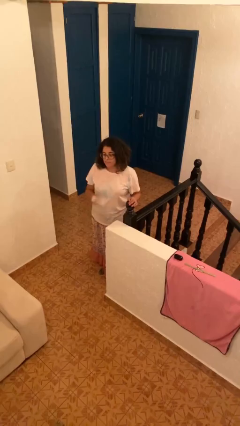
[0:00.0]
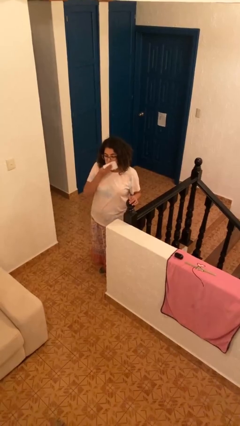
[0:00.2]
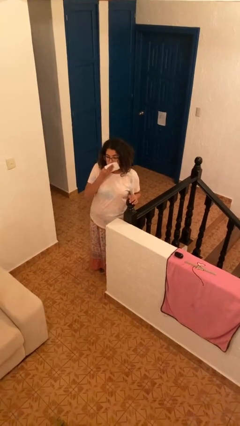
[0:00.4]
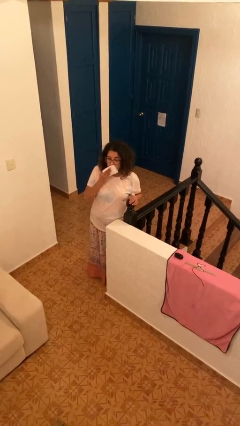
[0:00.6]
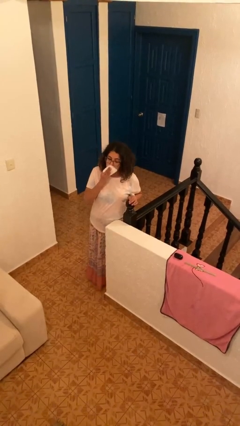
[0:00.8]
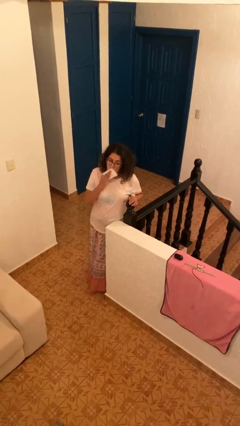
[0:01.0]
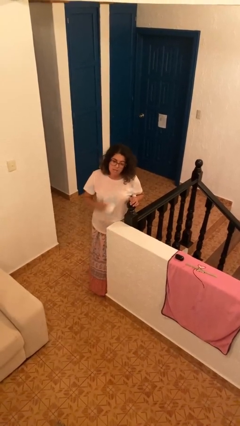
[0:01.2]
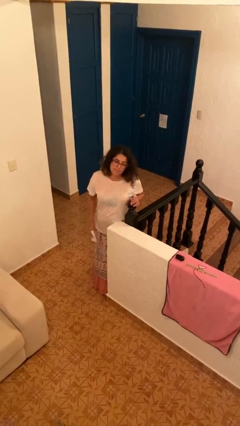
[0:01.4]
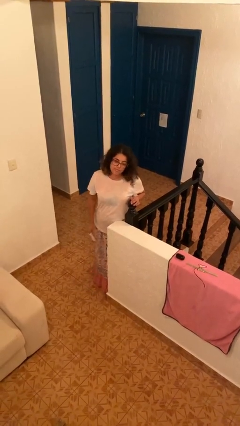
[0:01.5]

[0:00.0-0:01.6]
person wipes mouth with napkin

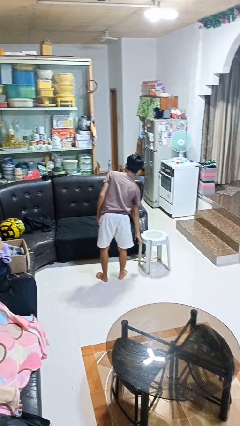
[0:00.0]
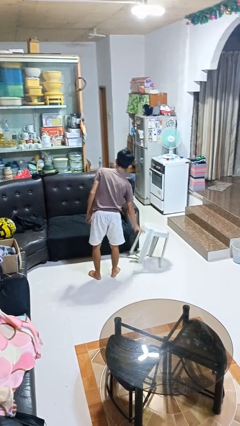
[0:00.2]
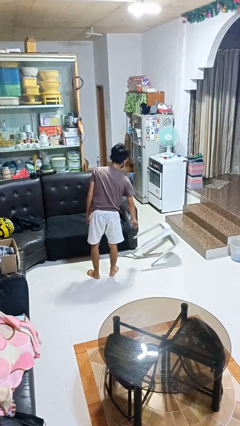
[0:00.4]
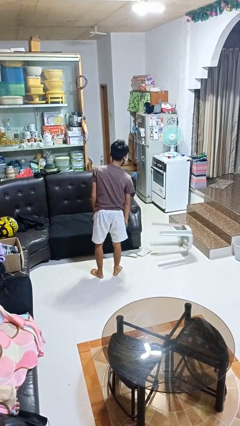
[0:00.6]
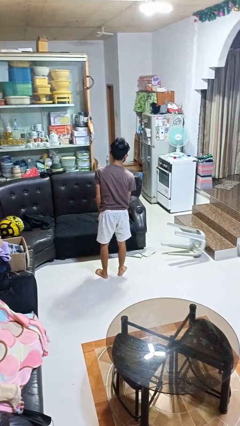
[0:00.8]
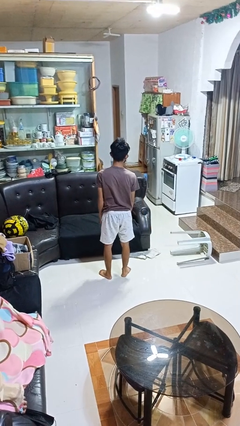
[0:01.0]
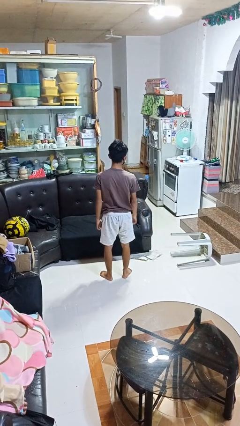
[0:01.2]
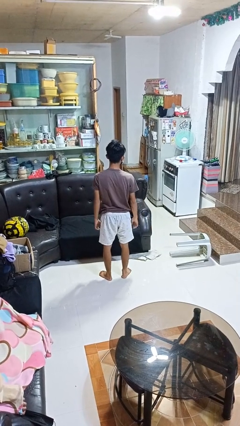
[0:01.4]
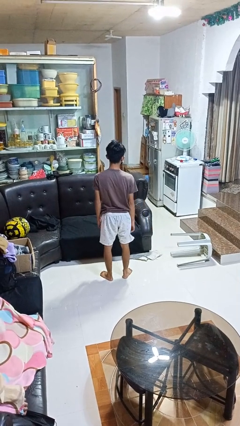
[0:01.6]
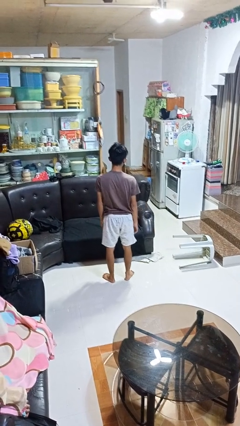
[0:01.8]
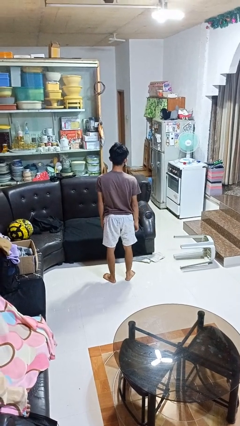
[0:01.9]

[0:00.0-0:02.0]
person knocks over furniture

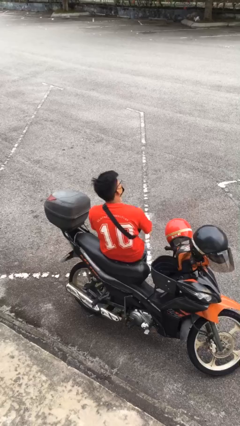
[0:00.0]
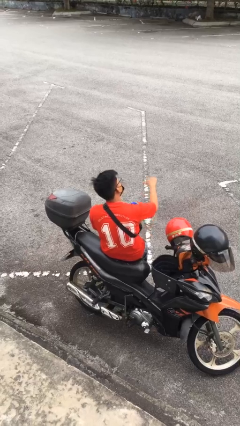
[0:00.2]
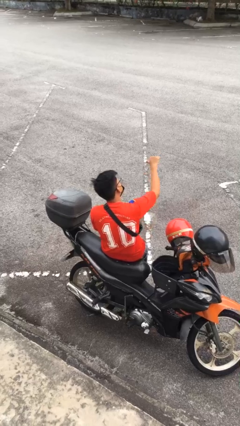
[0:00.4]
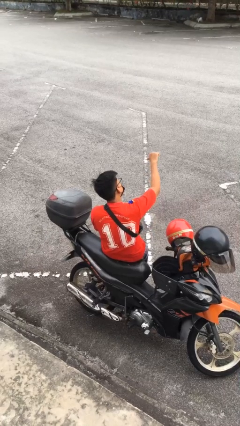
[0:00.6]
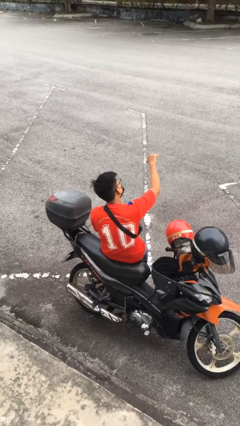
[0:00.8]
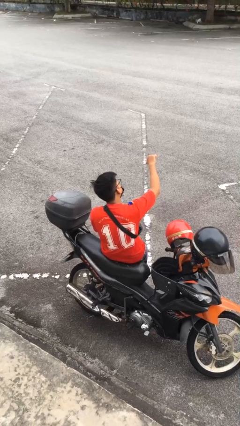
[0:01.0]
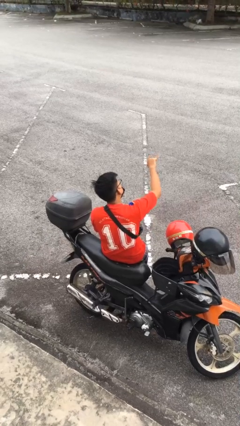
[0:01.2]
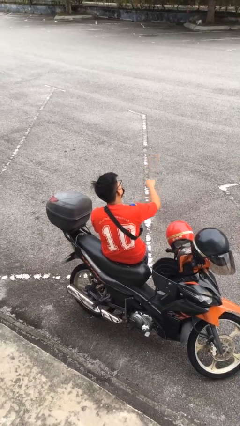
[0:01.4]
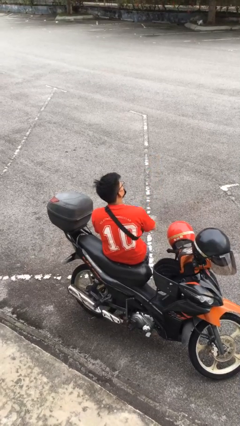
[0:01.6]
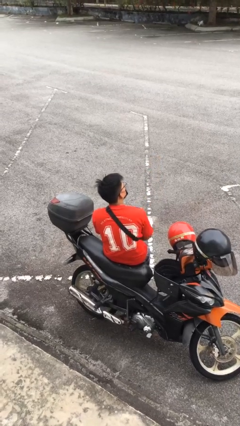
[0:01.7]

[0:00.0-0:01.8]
person gestures thumbs down

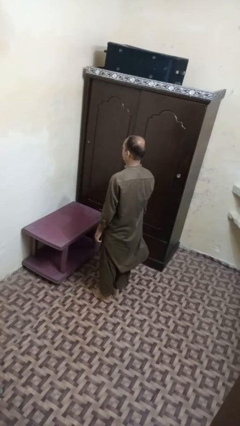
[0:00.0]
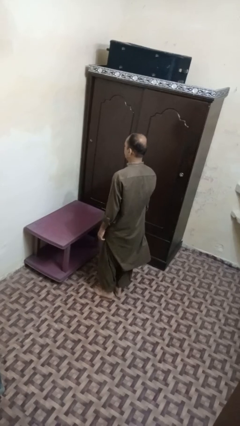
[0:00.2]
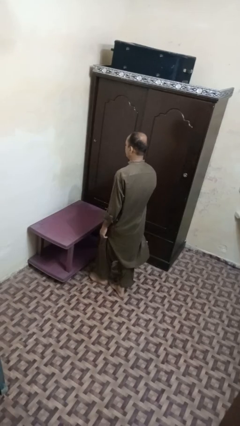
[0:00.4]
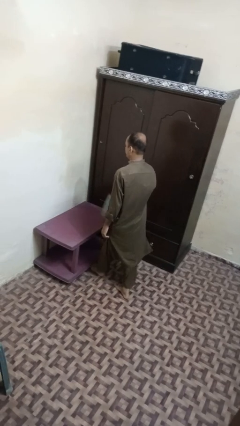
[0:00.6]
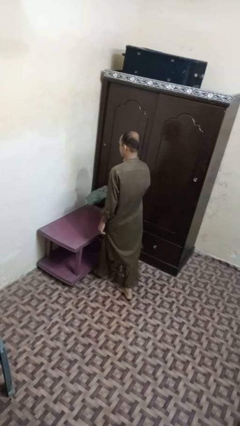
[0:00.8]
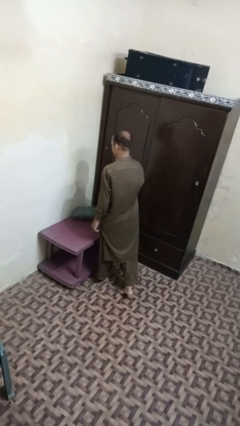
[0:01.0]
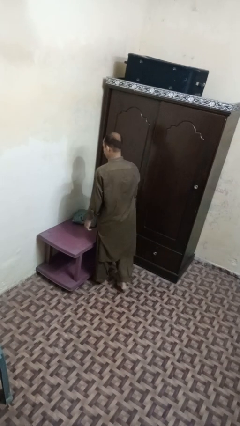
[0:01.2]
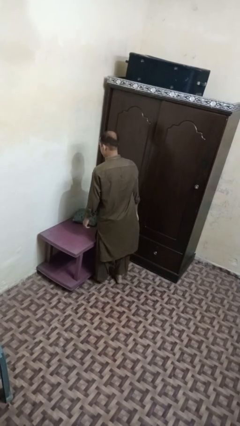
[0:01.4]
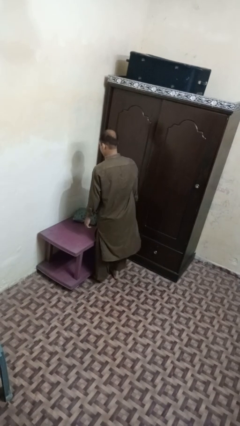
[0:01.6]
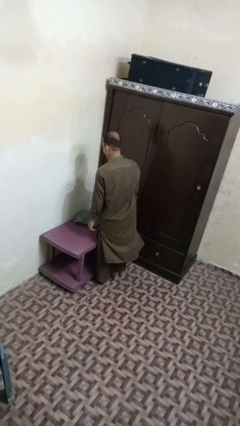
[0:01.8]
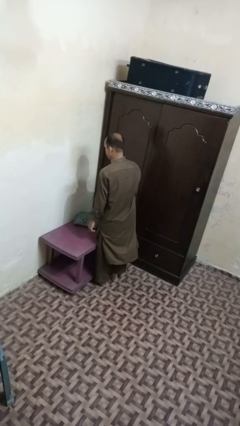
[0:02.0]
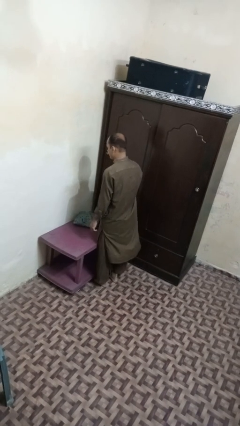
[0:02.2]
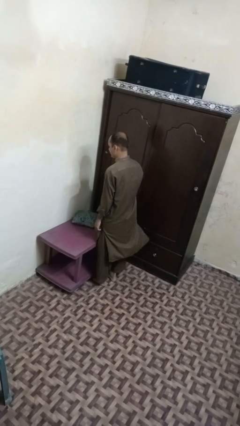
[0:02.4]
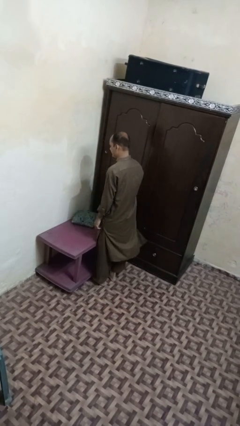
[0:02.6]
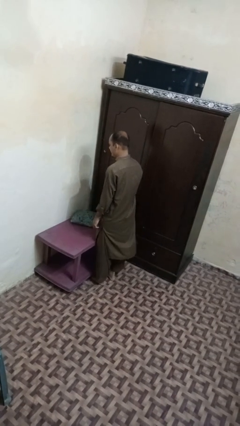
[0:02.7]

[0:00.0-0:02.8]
person throws object on table

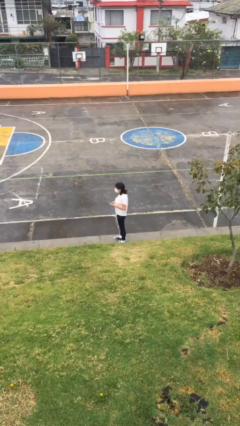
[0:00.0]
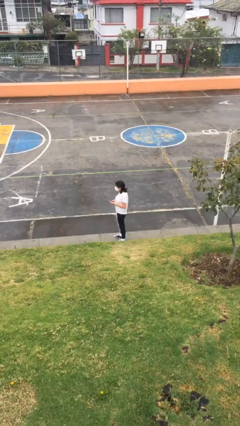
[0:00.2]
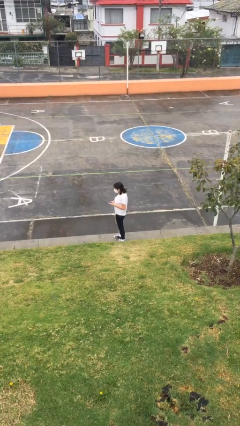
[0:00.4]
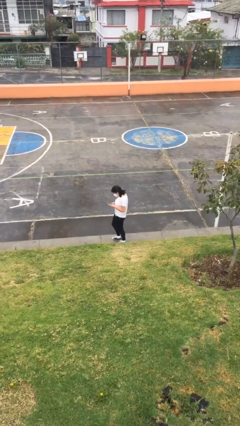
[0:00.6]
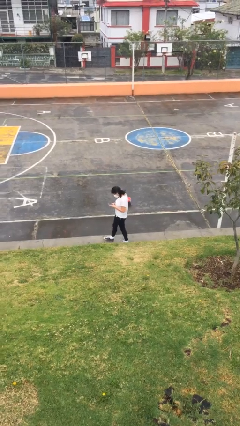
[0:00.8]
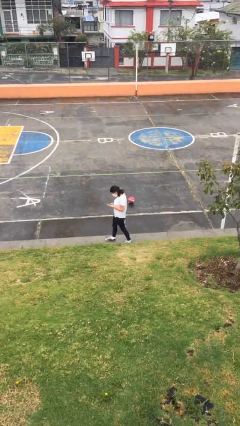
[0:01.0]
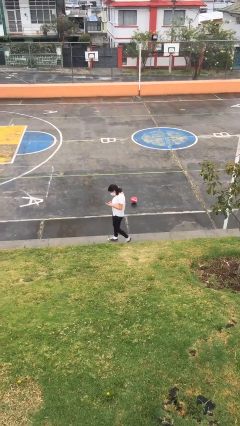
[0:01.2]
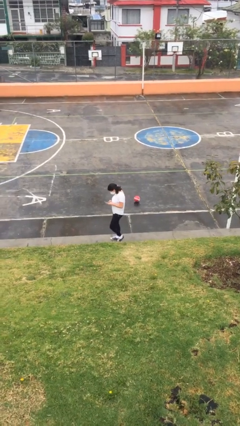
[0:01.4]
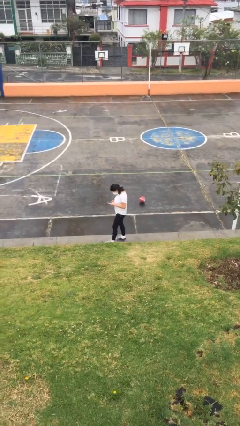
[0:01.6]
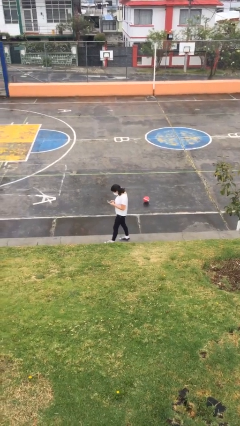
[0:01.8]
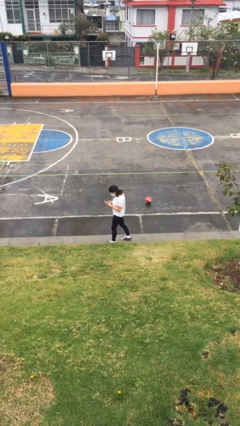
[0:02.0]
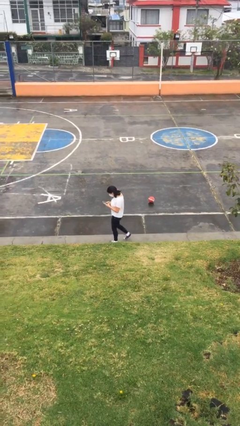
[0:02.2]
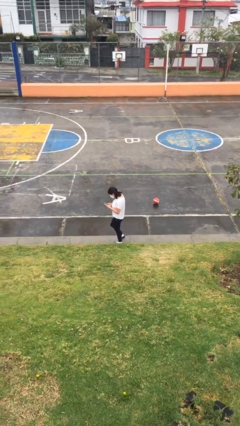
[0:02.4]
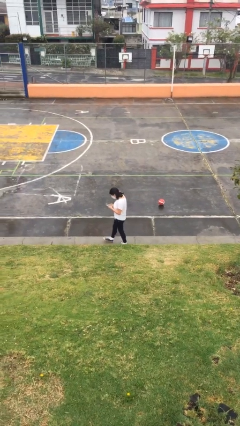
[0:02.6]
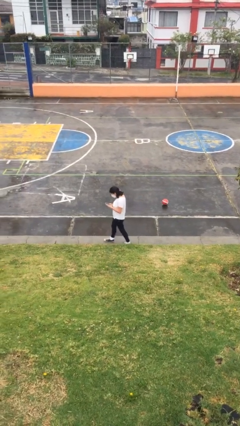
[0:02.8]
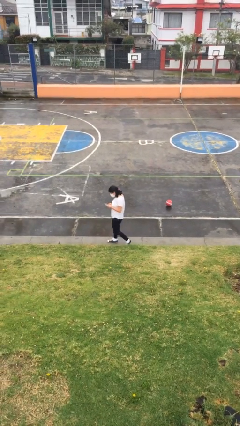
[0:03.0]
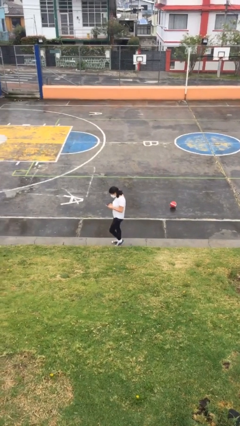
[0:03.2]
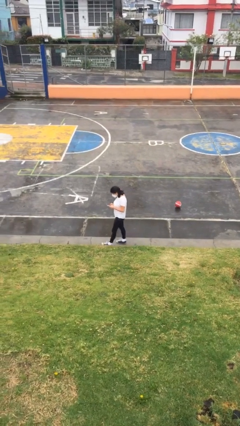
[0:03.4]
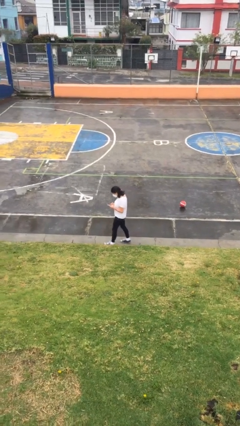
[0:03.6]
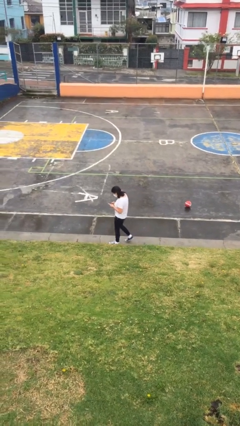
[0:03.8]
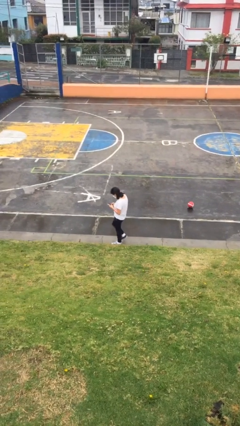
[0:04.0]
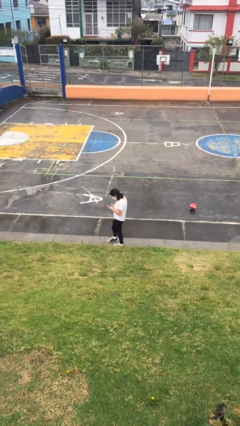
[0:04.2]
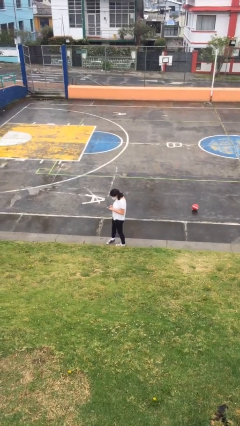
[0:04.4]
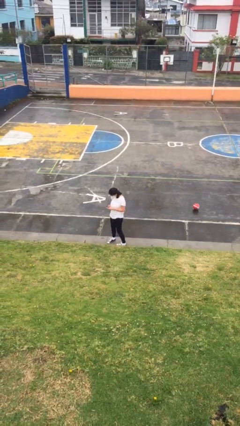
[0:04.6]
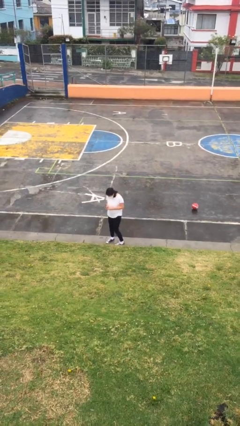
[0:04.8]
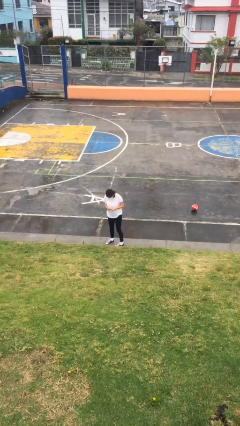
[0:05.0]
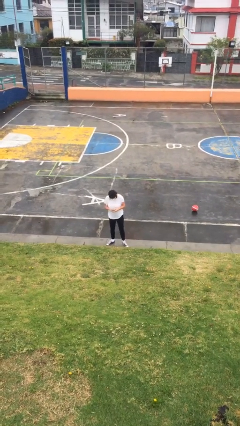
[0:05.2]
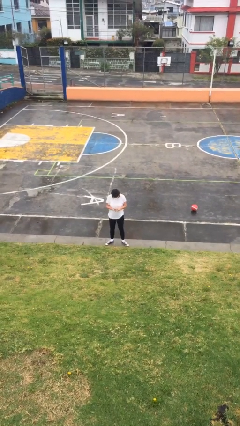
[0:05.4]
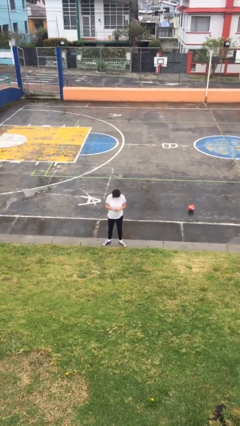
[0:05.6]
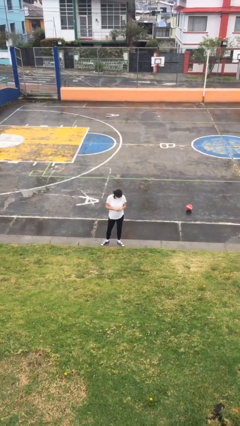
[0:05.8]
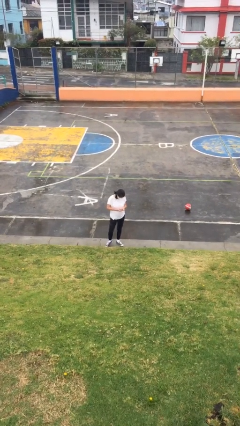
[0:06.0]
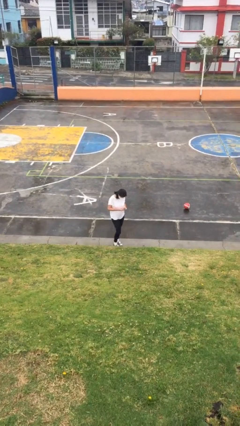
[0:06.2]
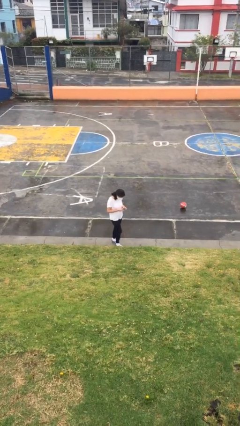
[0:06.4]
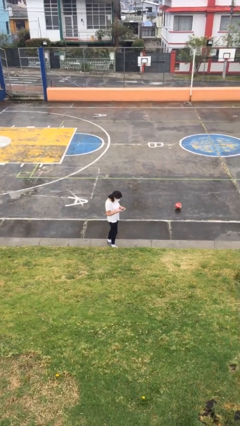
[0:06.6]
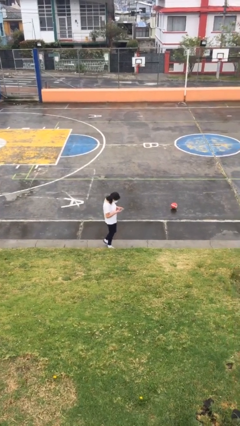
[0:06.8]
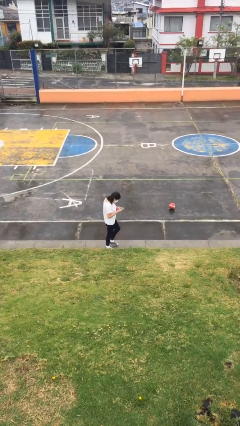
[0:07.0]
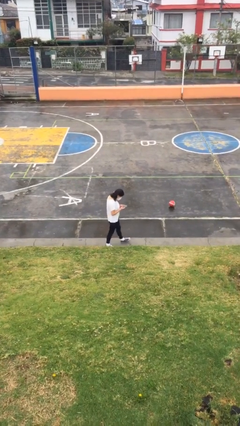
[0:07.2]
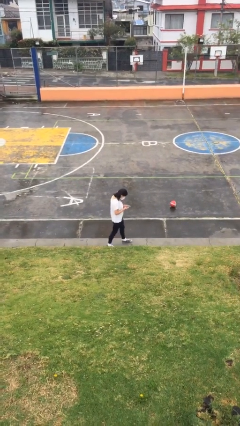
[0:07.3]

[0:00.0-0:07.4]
person texts on phone

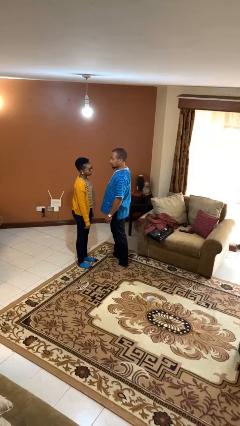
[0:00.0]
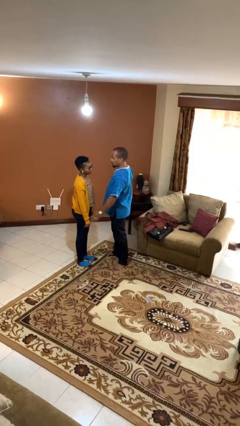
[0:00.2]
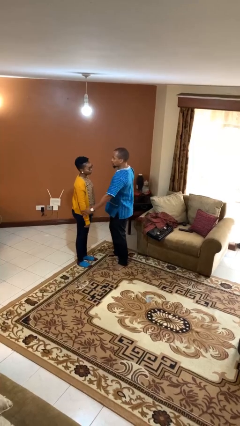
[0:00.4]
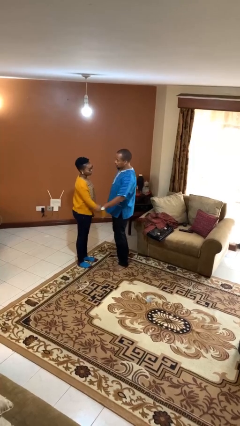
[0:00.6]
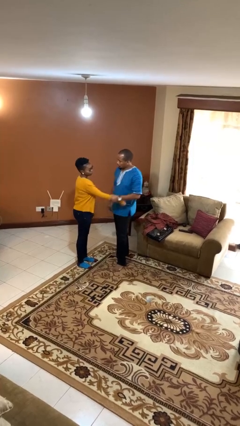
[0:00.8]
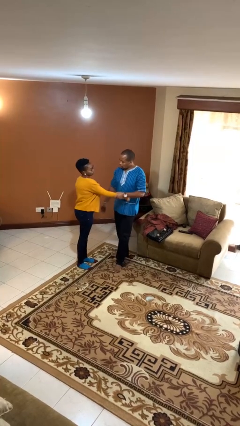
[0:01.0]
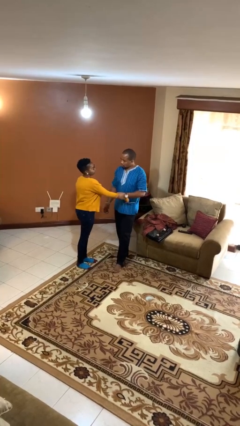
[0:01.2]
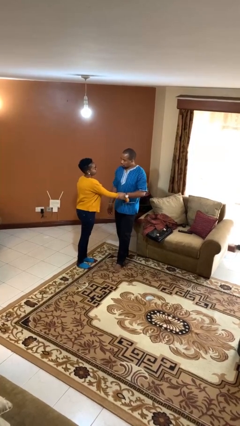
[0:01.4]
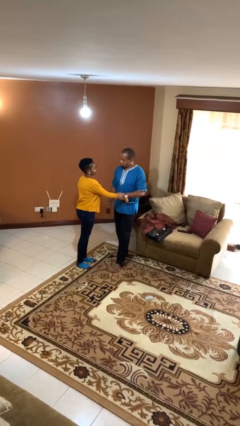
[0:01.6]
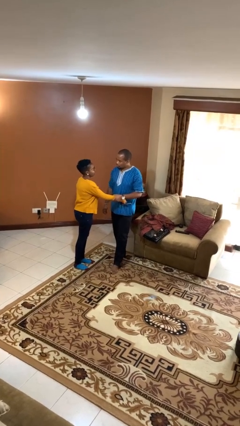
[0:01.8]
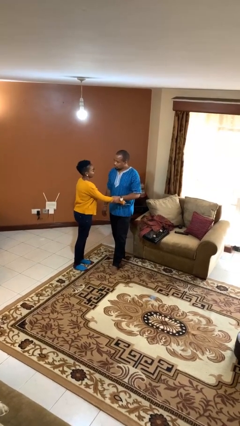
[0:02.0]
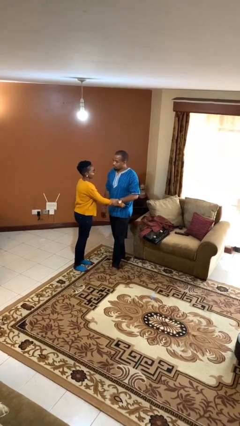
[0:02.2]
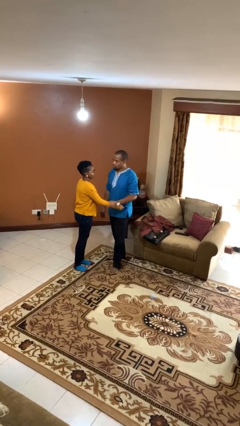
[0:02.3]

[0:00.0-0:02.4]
person grabs person by forearm
